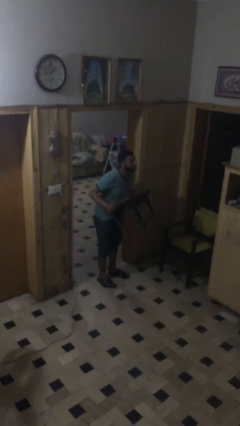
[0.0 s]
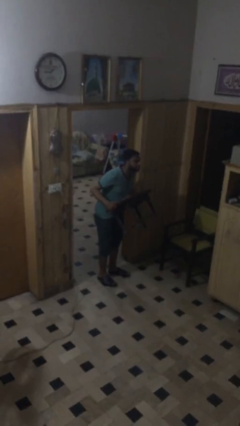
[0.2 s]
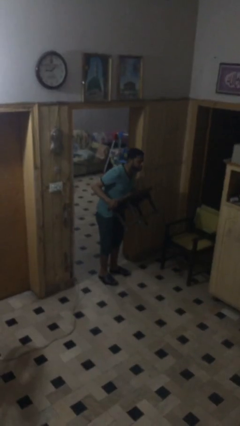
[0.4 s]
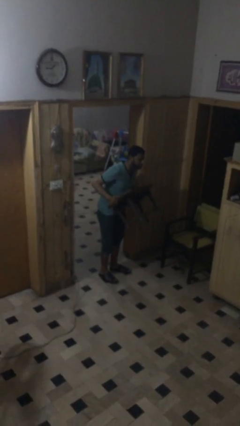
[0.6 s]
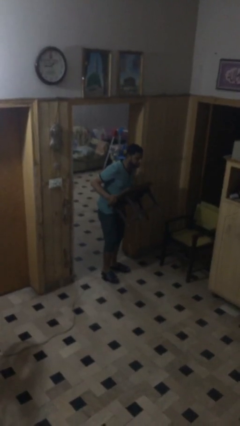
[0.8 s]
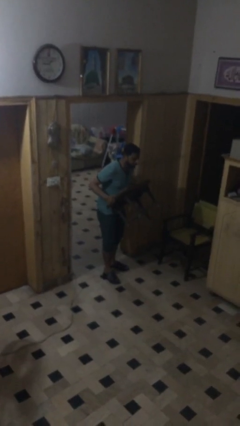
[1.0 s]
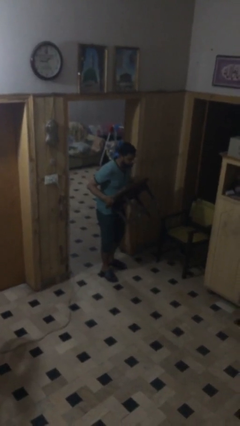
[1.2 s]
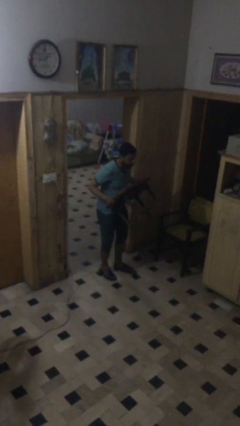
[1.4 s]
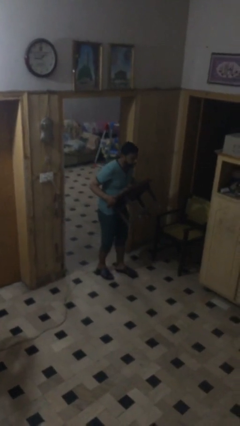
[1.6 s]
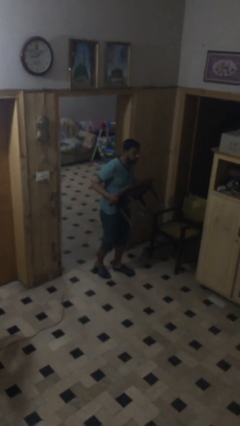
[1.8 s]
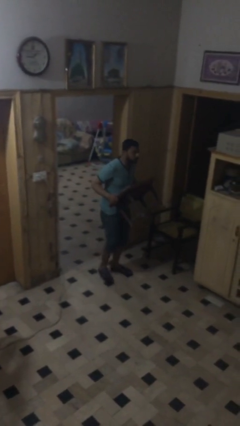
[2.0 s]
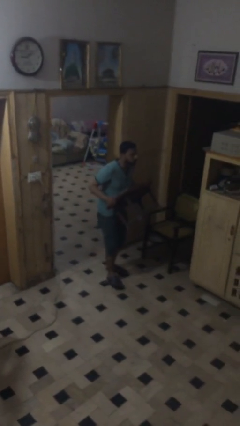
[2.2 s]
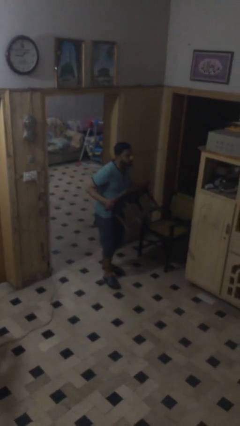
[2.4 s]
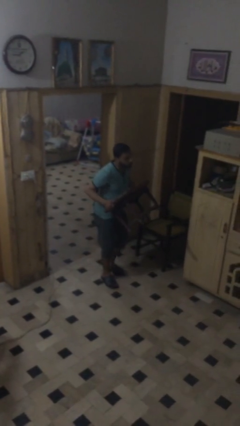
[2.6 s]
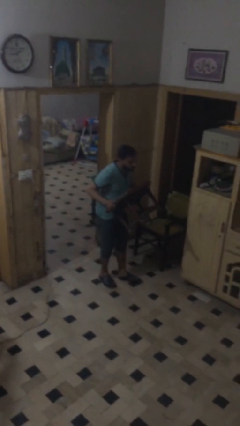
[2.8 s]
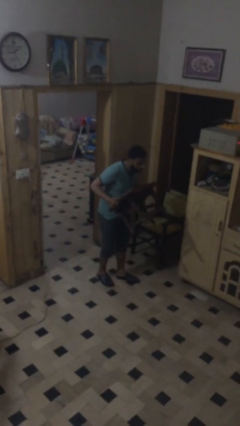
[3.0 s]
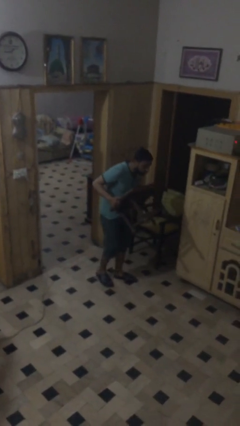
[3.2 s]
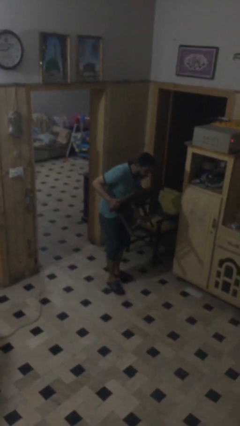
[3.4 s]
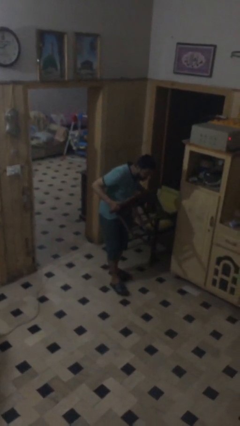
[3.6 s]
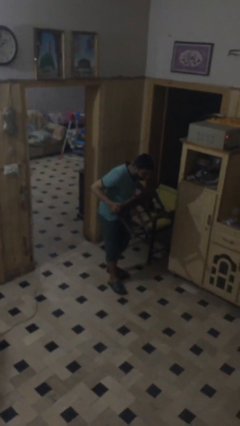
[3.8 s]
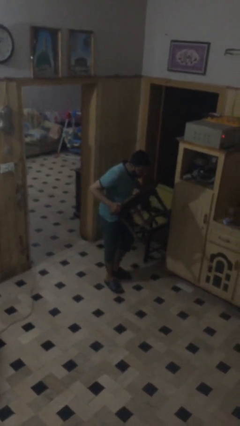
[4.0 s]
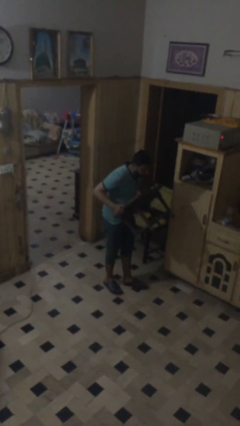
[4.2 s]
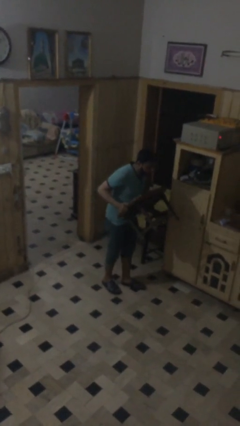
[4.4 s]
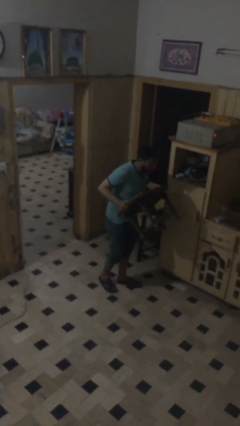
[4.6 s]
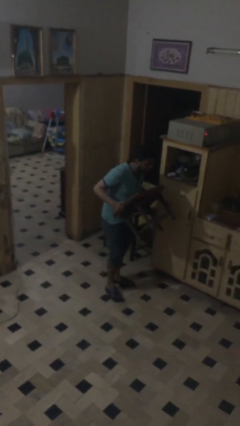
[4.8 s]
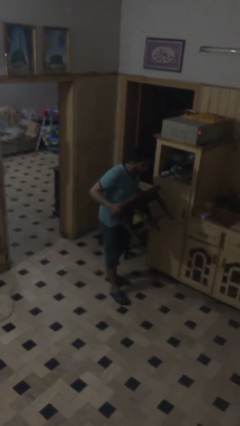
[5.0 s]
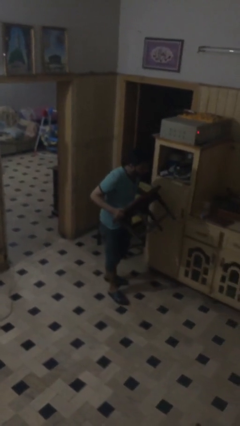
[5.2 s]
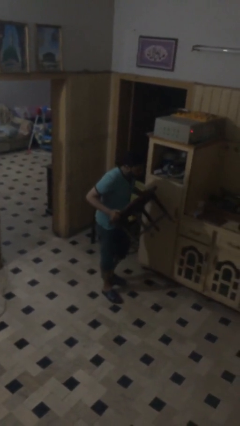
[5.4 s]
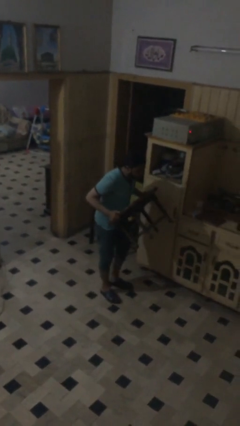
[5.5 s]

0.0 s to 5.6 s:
person carries heavy object

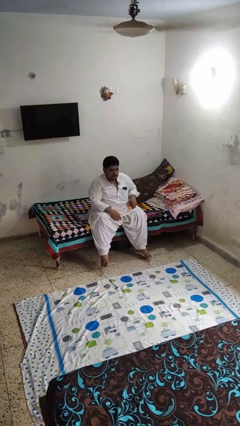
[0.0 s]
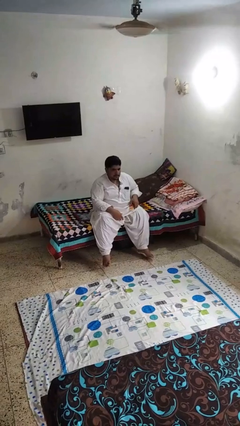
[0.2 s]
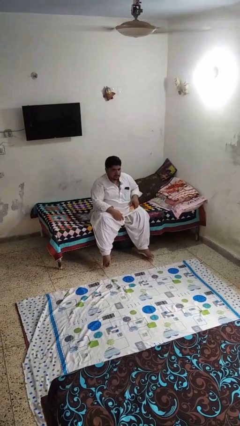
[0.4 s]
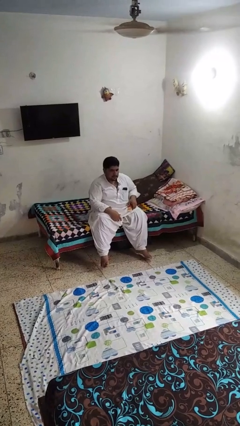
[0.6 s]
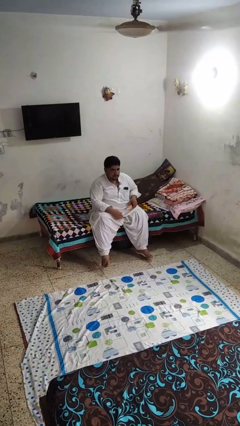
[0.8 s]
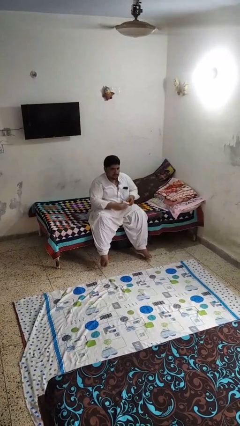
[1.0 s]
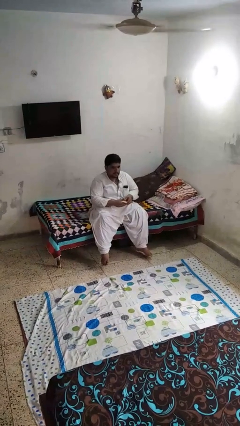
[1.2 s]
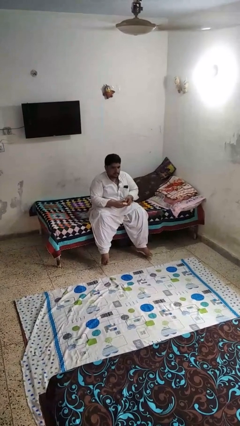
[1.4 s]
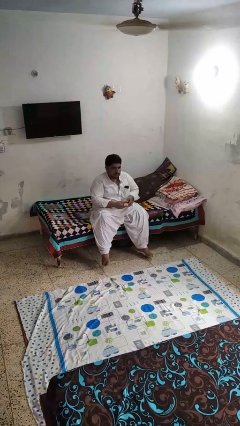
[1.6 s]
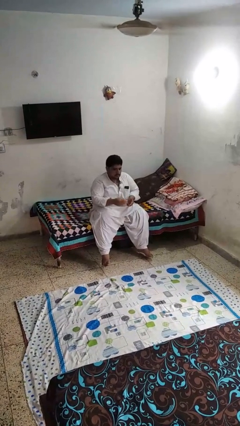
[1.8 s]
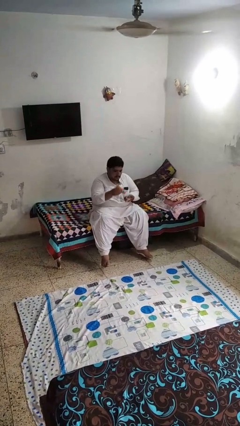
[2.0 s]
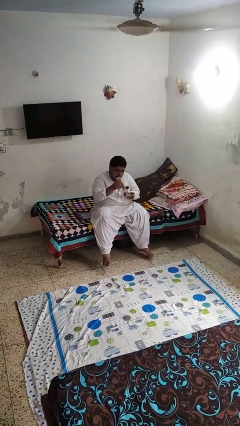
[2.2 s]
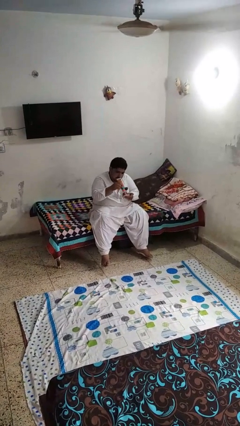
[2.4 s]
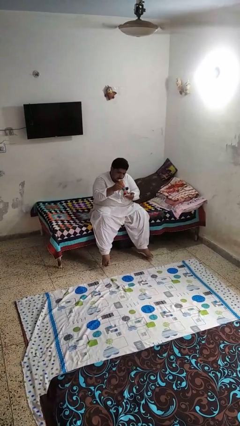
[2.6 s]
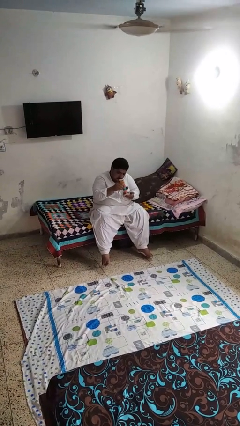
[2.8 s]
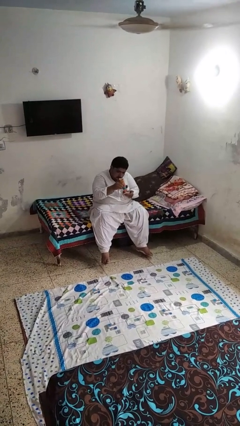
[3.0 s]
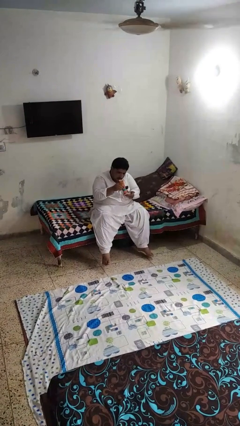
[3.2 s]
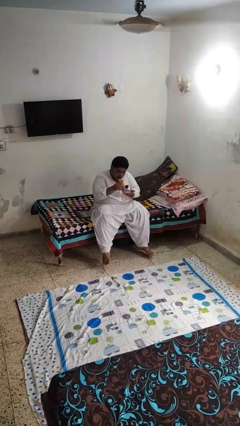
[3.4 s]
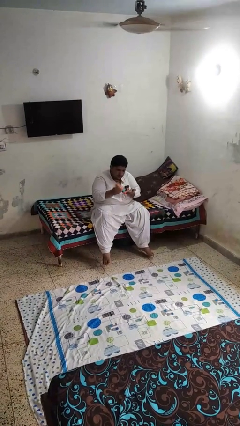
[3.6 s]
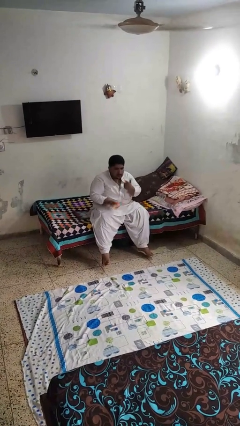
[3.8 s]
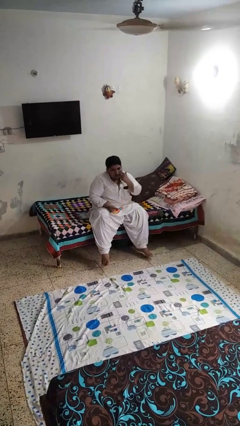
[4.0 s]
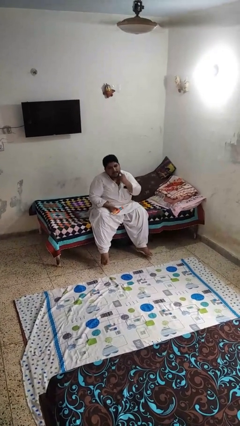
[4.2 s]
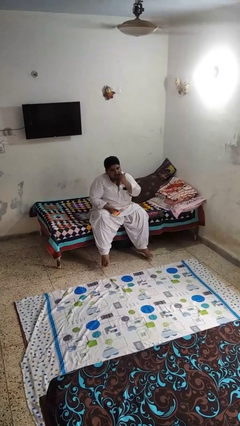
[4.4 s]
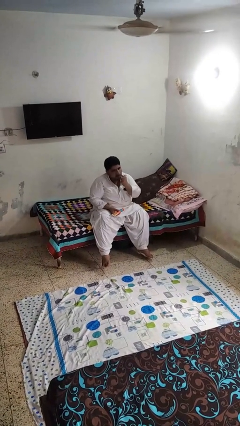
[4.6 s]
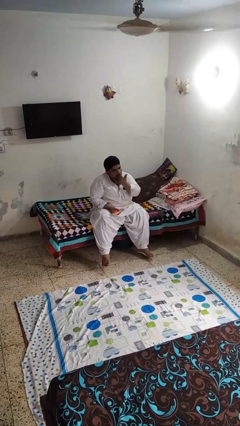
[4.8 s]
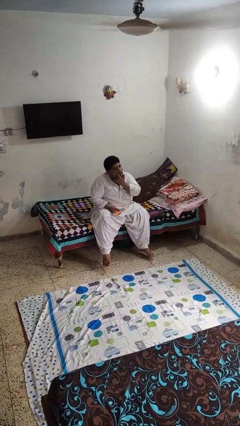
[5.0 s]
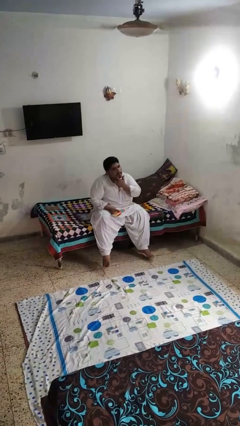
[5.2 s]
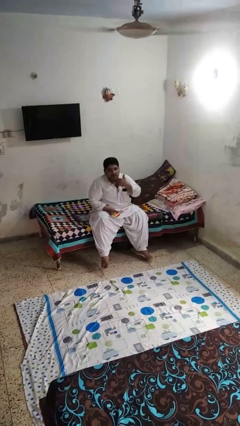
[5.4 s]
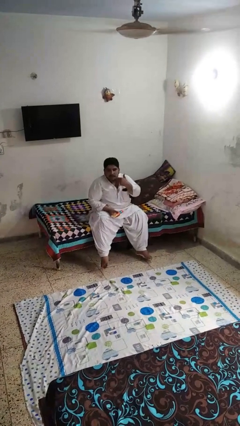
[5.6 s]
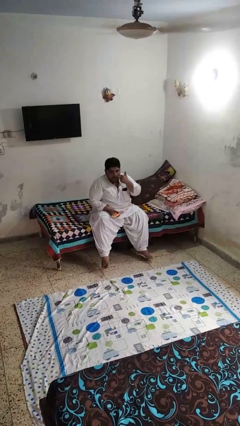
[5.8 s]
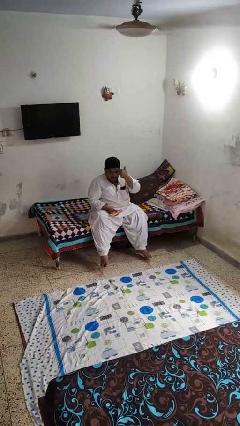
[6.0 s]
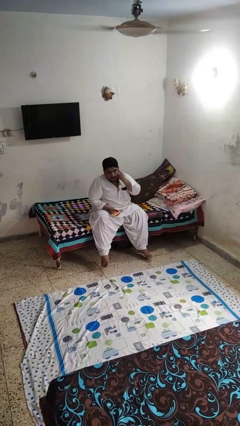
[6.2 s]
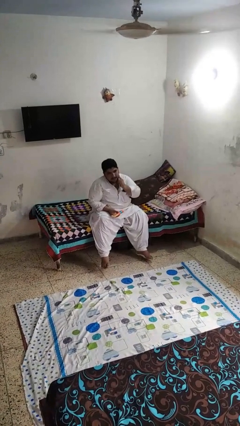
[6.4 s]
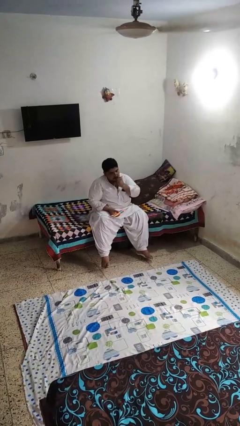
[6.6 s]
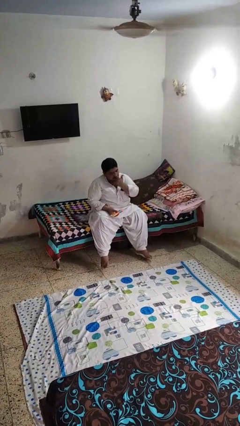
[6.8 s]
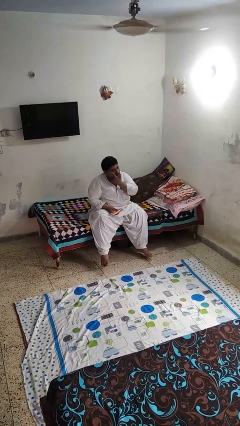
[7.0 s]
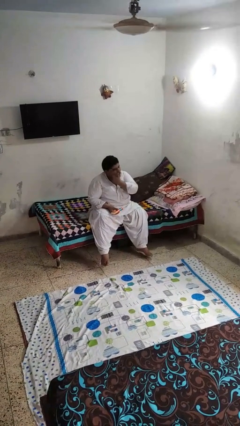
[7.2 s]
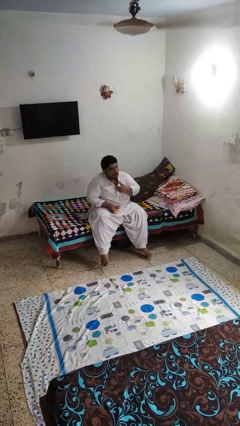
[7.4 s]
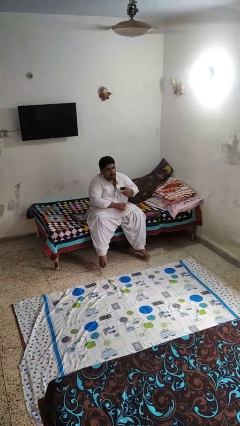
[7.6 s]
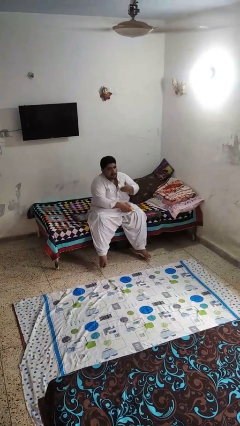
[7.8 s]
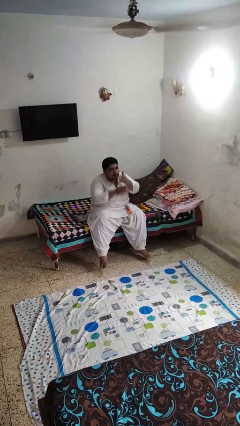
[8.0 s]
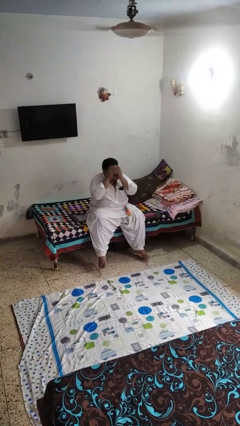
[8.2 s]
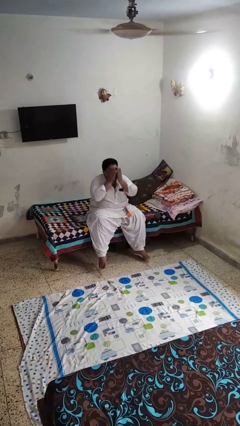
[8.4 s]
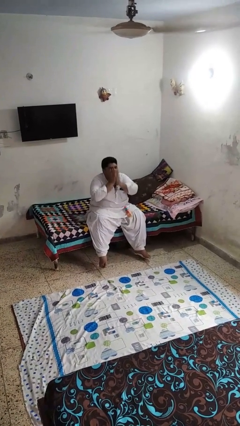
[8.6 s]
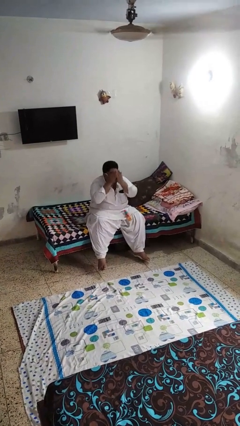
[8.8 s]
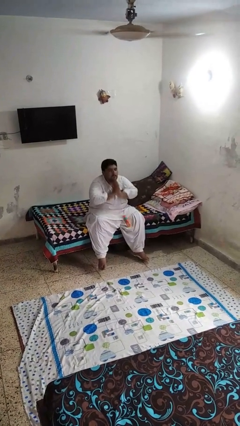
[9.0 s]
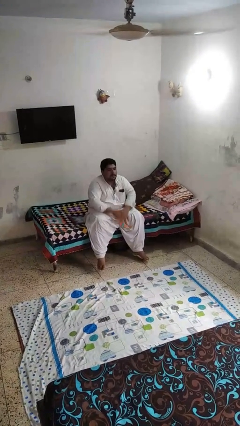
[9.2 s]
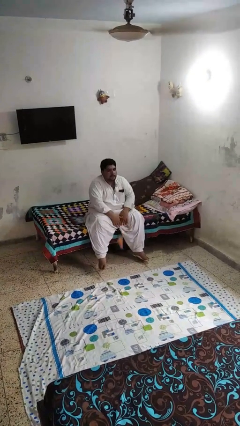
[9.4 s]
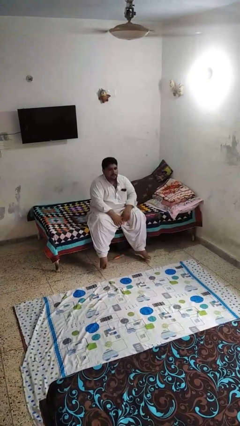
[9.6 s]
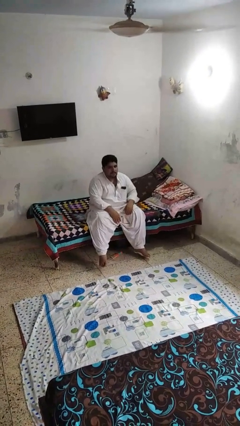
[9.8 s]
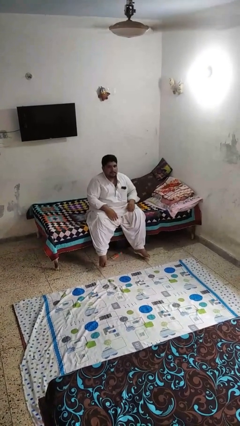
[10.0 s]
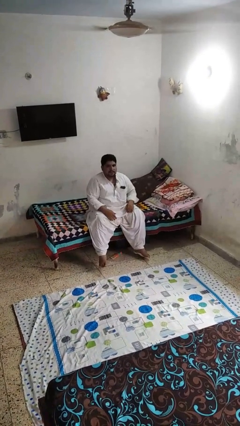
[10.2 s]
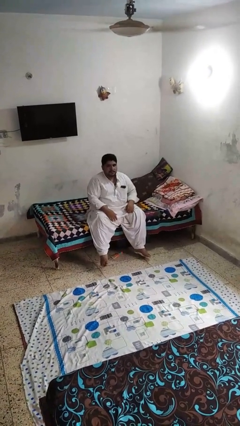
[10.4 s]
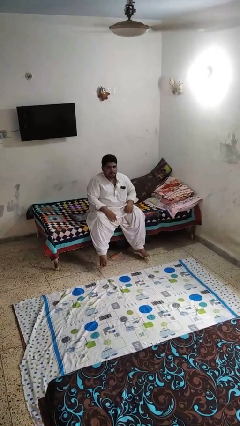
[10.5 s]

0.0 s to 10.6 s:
person applies facial moisturizer

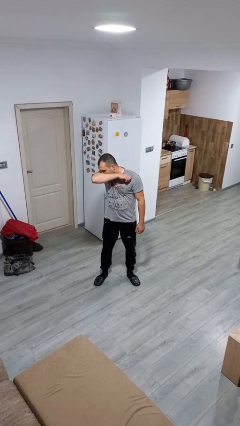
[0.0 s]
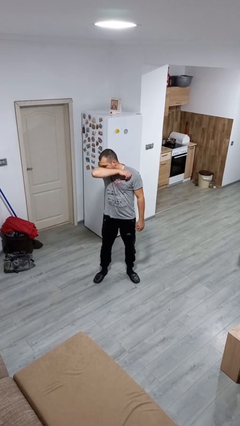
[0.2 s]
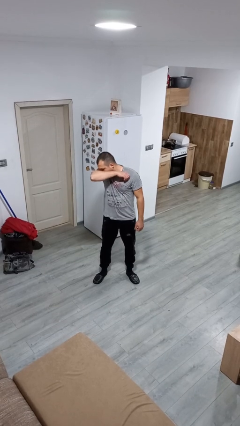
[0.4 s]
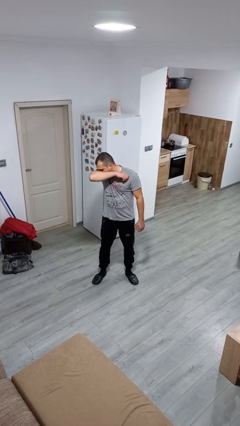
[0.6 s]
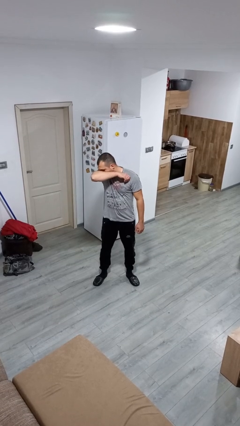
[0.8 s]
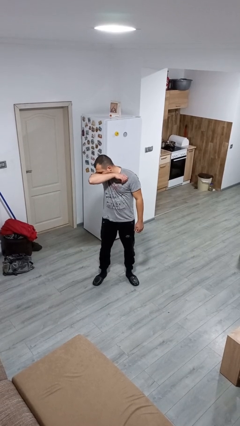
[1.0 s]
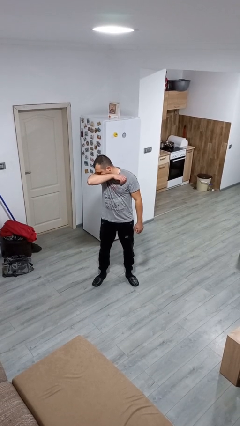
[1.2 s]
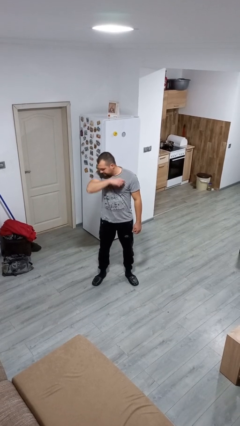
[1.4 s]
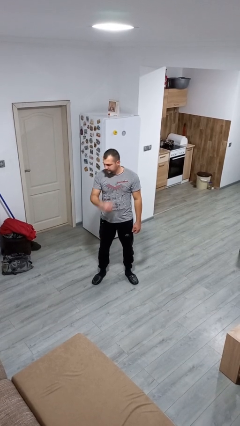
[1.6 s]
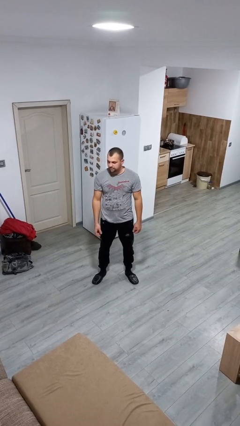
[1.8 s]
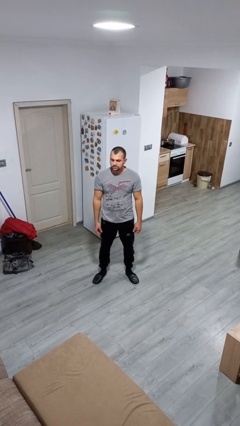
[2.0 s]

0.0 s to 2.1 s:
person sneezes into arm
